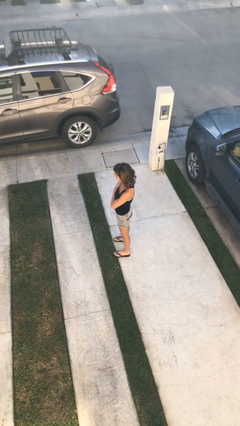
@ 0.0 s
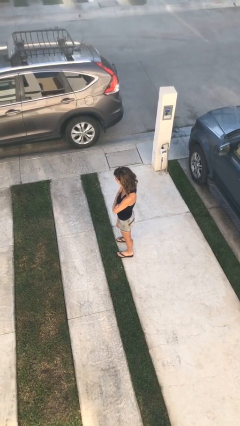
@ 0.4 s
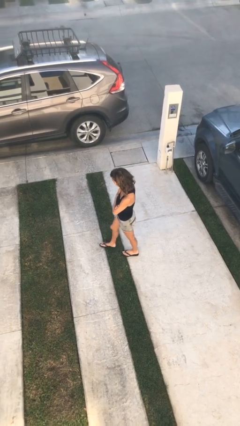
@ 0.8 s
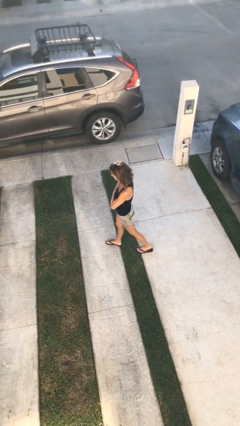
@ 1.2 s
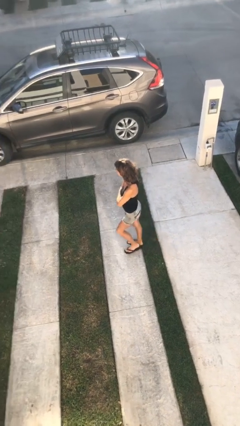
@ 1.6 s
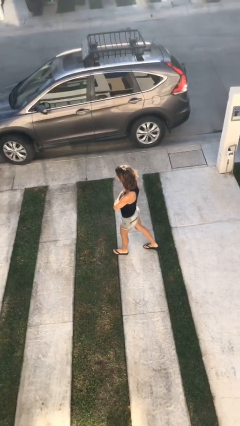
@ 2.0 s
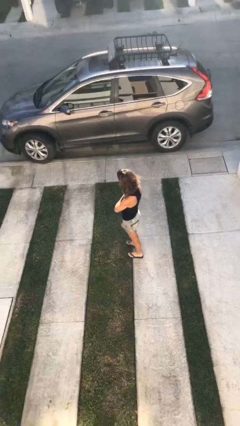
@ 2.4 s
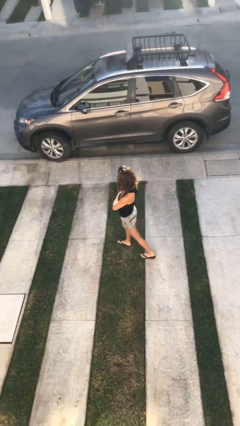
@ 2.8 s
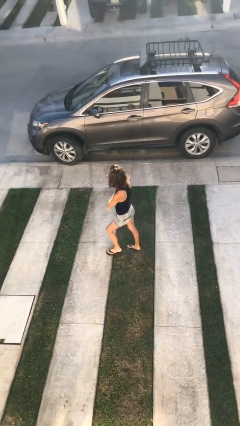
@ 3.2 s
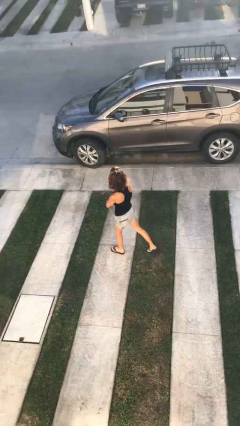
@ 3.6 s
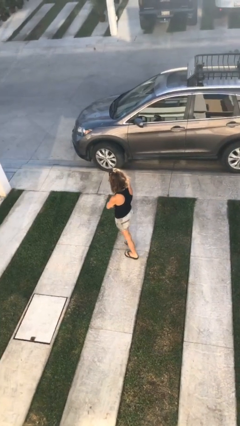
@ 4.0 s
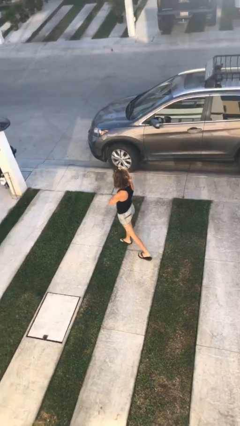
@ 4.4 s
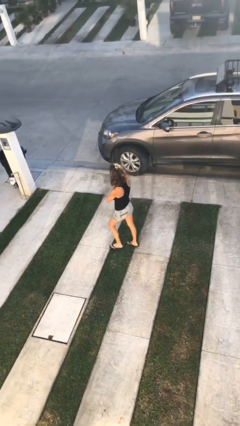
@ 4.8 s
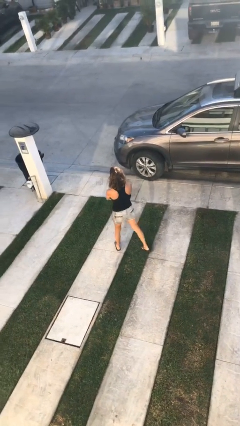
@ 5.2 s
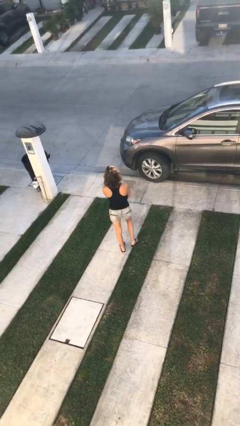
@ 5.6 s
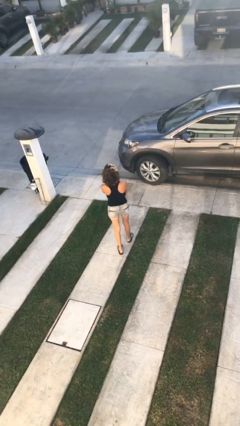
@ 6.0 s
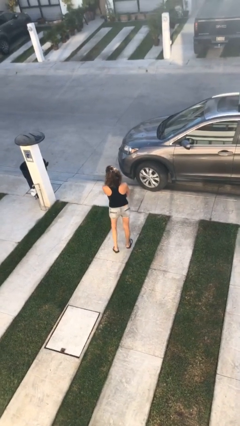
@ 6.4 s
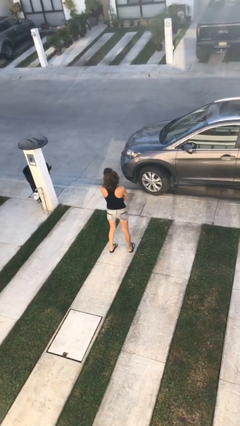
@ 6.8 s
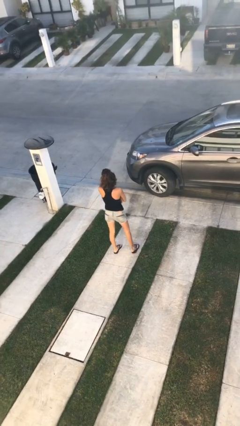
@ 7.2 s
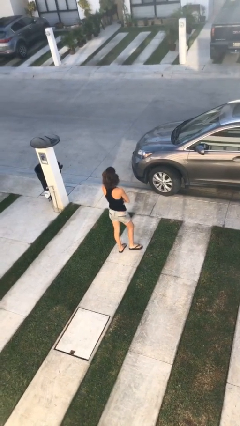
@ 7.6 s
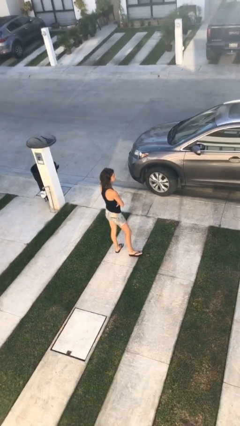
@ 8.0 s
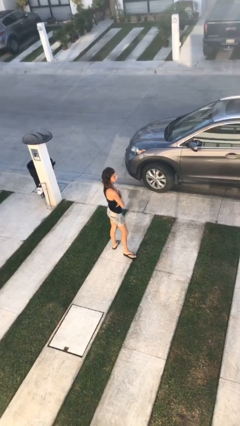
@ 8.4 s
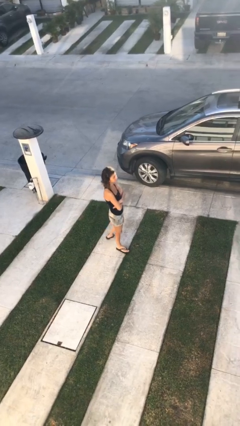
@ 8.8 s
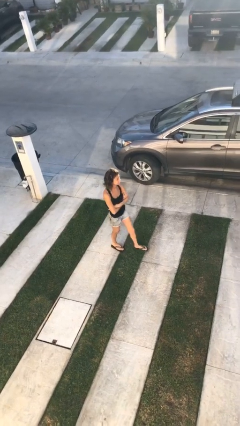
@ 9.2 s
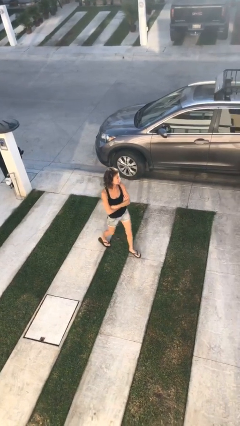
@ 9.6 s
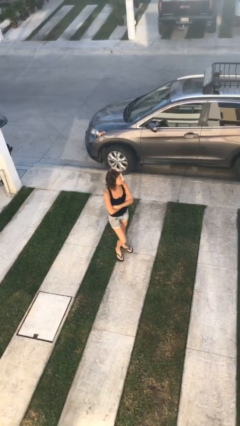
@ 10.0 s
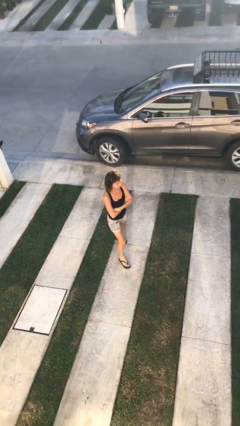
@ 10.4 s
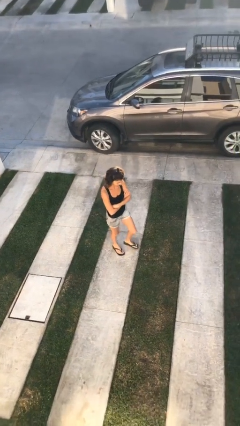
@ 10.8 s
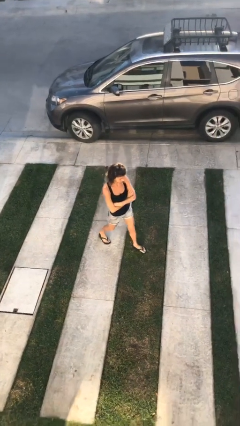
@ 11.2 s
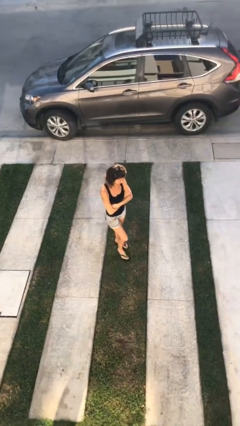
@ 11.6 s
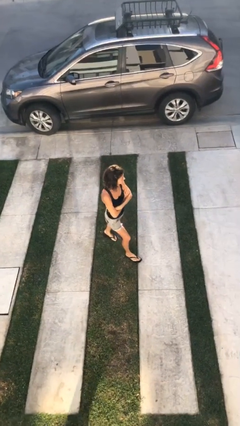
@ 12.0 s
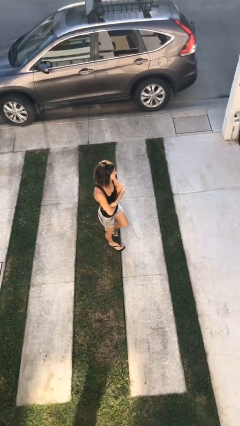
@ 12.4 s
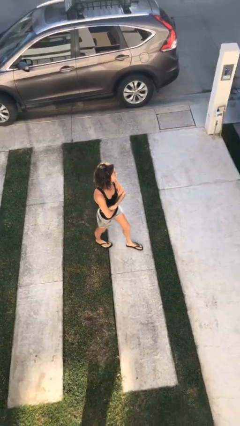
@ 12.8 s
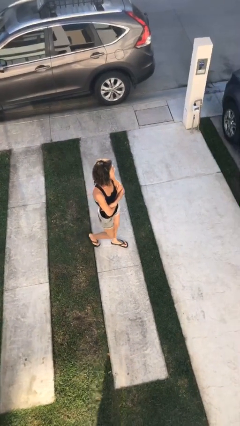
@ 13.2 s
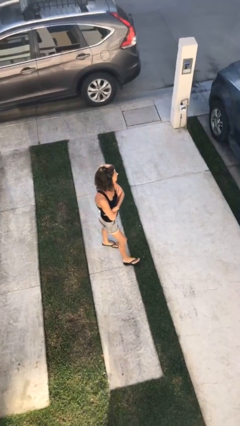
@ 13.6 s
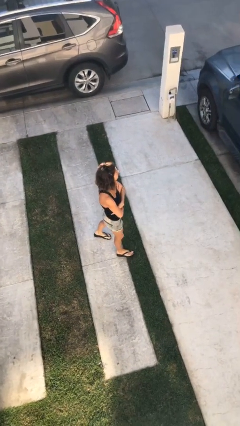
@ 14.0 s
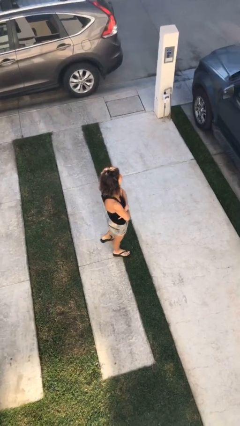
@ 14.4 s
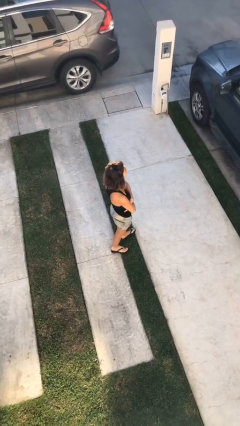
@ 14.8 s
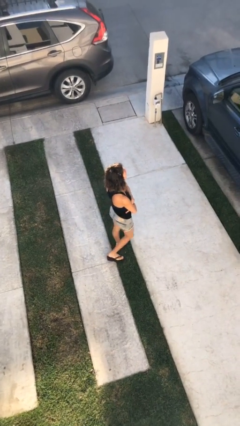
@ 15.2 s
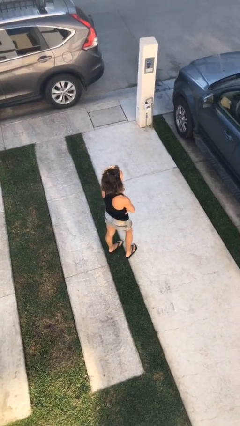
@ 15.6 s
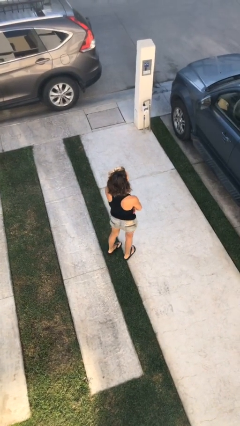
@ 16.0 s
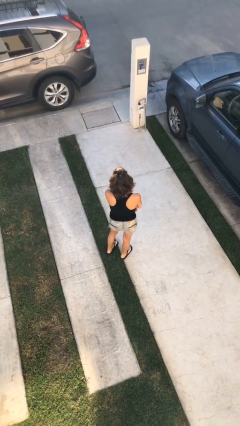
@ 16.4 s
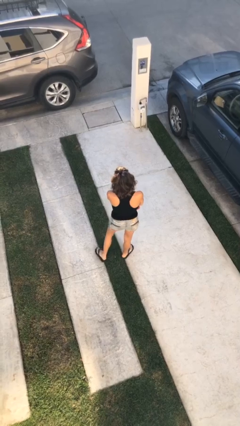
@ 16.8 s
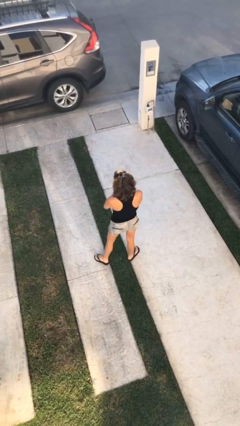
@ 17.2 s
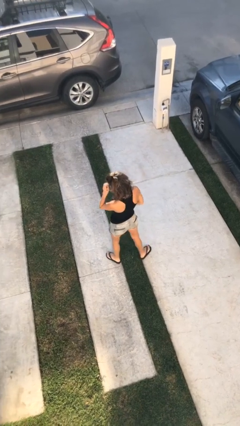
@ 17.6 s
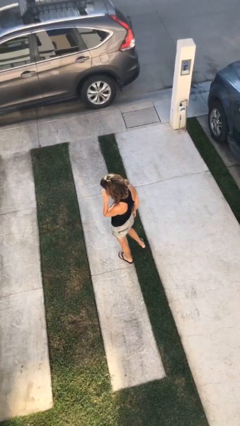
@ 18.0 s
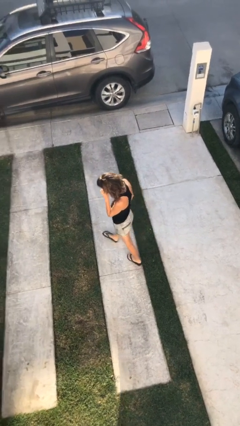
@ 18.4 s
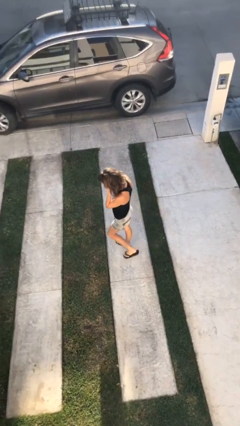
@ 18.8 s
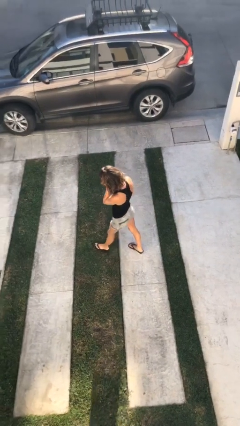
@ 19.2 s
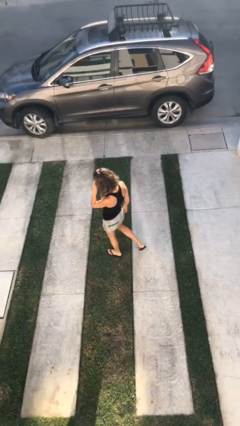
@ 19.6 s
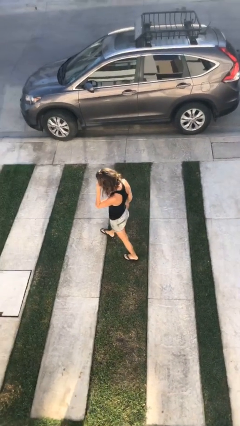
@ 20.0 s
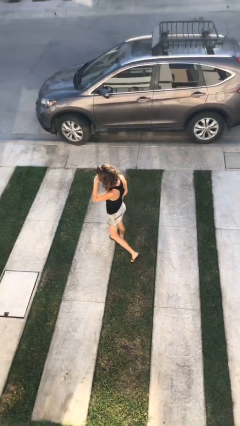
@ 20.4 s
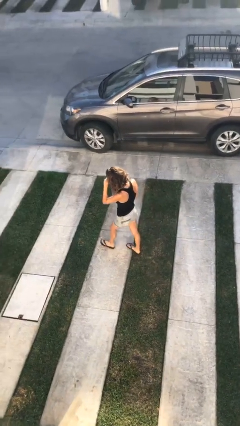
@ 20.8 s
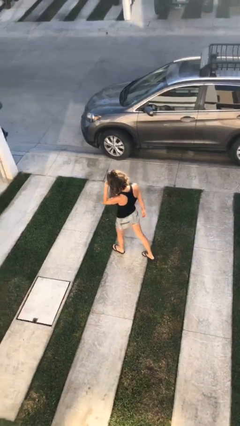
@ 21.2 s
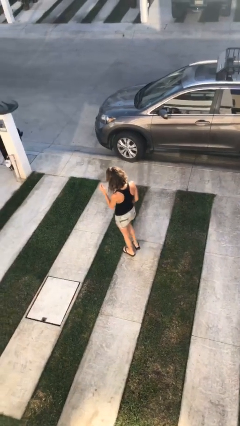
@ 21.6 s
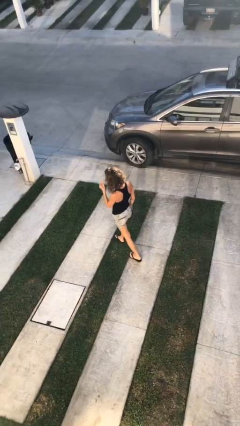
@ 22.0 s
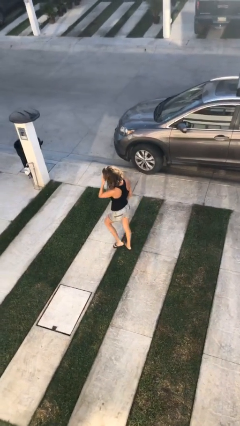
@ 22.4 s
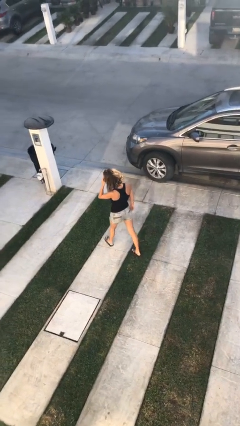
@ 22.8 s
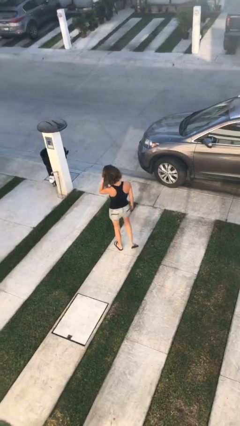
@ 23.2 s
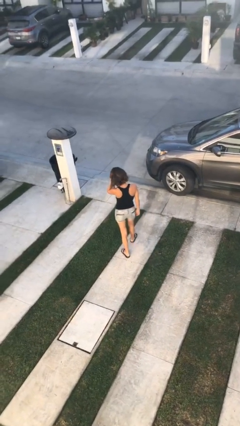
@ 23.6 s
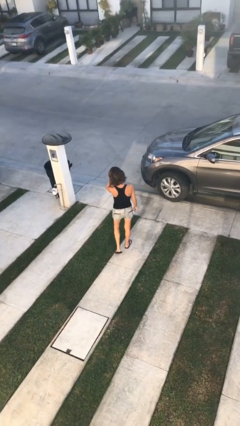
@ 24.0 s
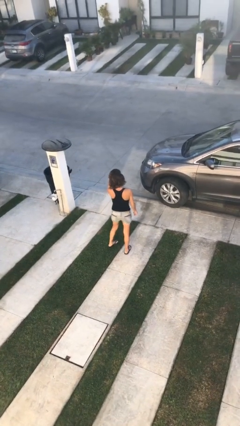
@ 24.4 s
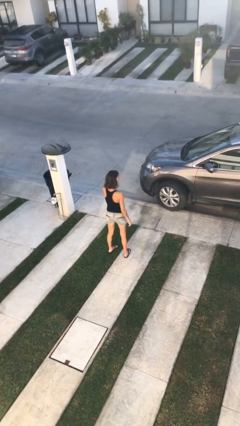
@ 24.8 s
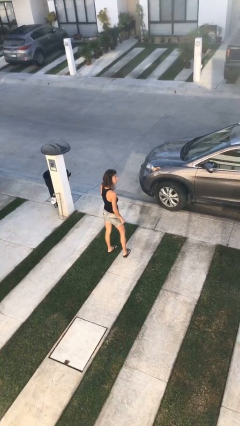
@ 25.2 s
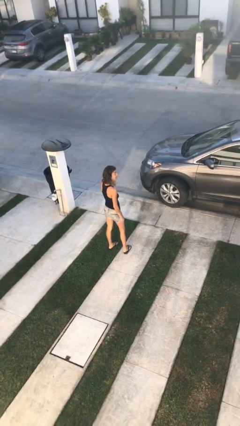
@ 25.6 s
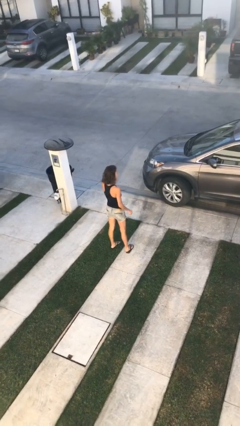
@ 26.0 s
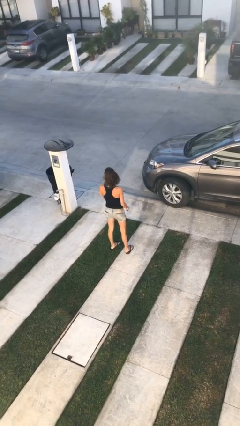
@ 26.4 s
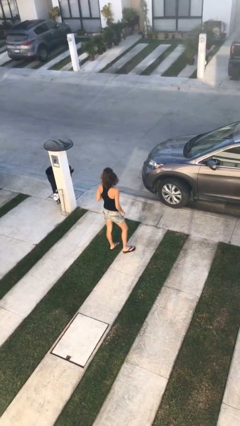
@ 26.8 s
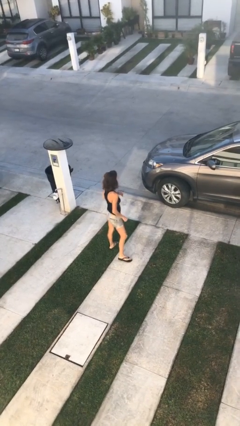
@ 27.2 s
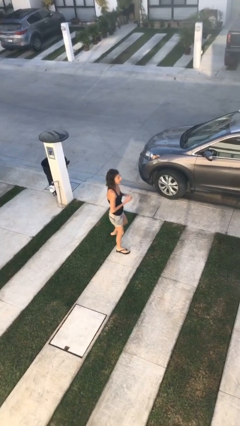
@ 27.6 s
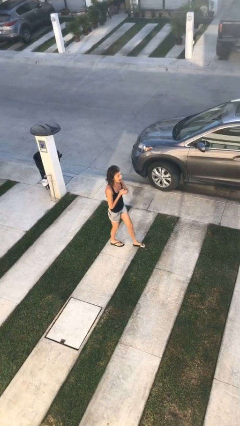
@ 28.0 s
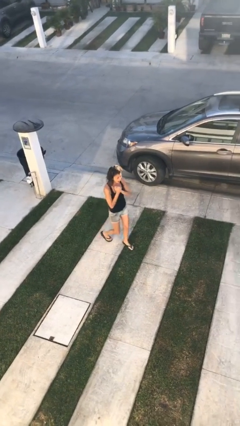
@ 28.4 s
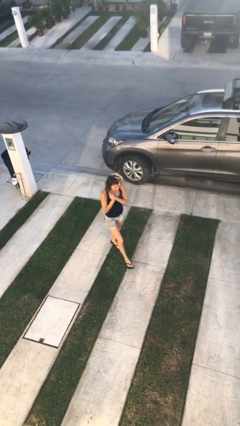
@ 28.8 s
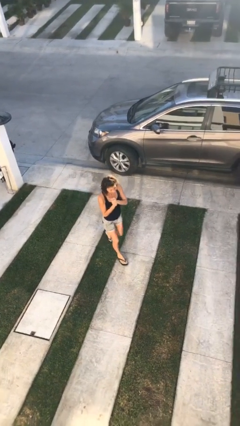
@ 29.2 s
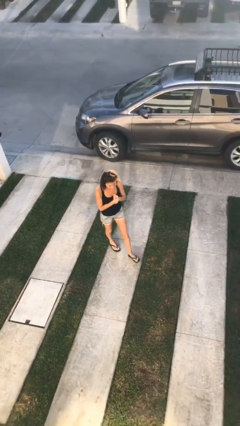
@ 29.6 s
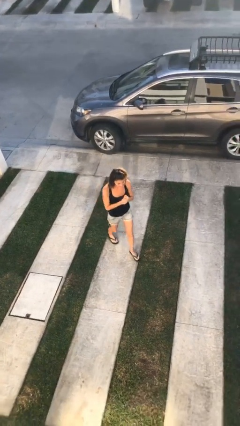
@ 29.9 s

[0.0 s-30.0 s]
person walks

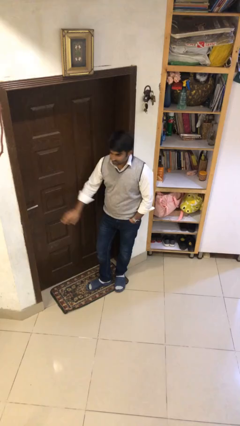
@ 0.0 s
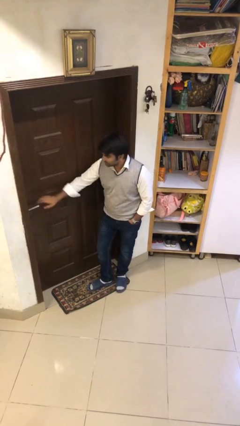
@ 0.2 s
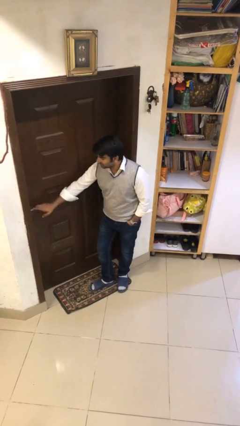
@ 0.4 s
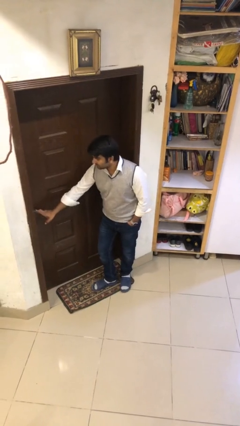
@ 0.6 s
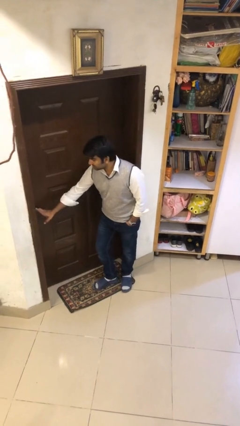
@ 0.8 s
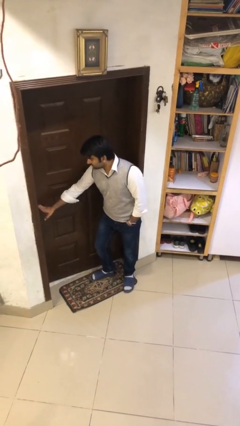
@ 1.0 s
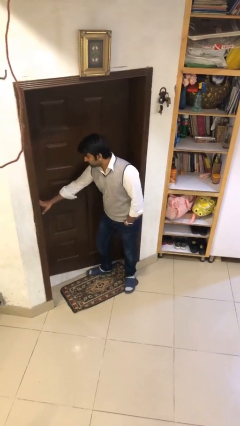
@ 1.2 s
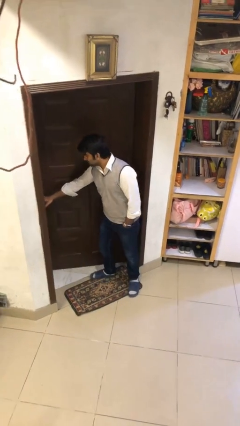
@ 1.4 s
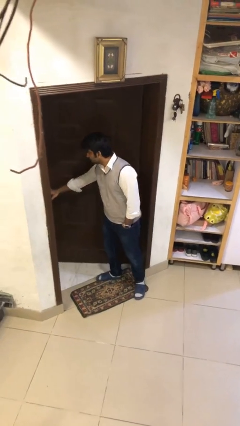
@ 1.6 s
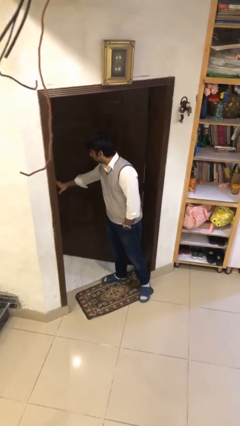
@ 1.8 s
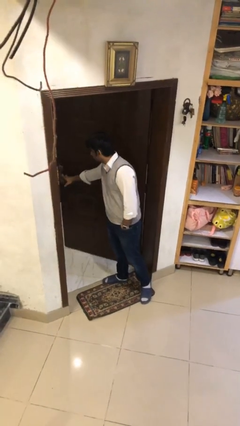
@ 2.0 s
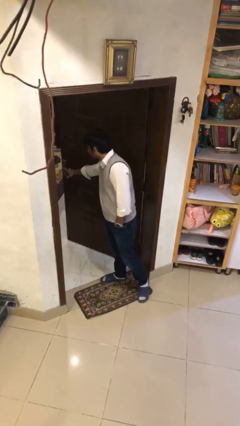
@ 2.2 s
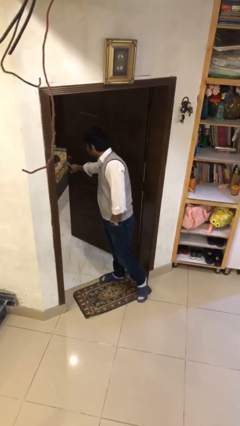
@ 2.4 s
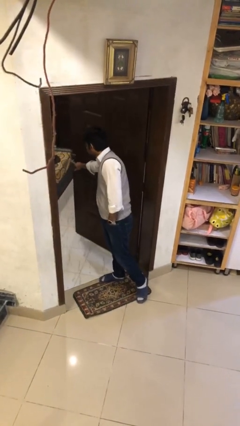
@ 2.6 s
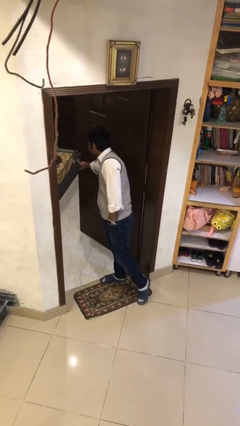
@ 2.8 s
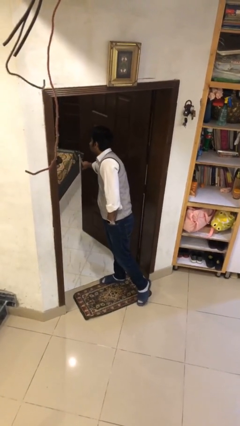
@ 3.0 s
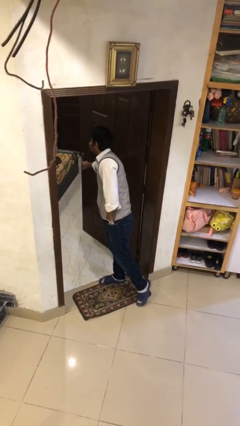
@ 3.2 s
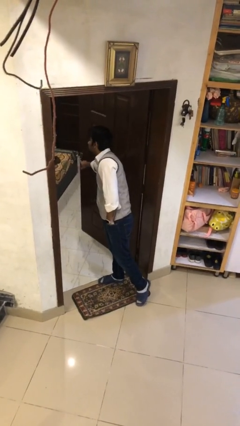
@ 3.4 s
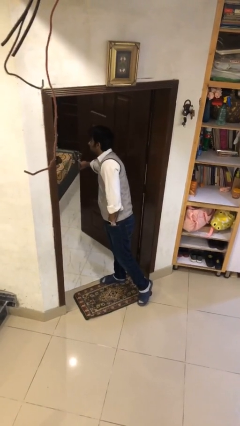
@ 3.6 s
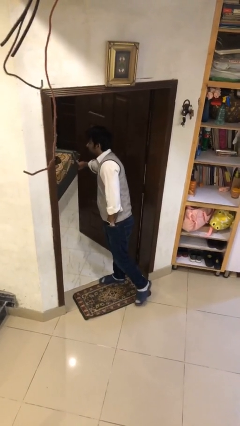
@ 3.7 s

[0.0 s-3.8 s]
person opens facility door
